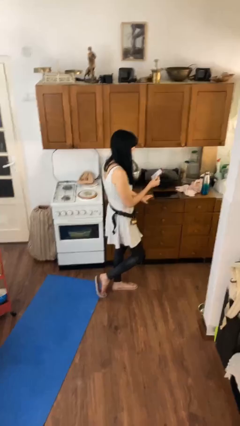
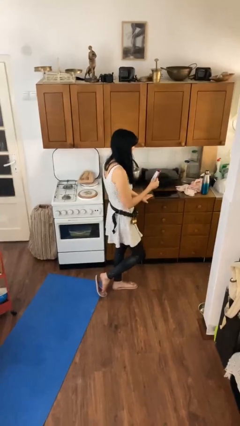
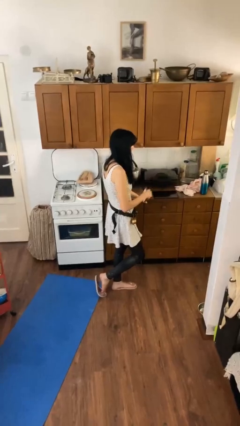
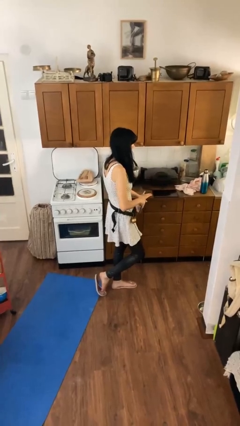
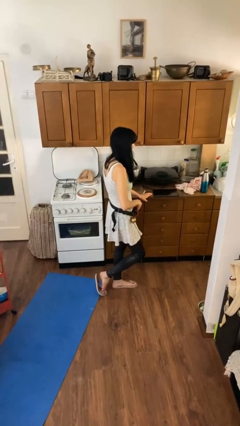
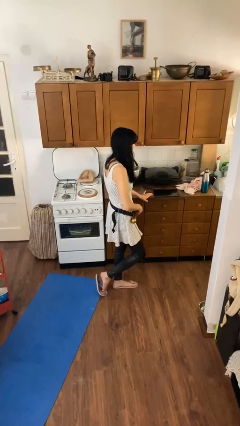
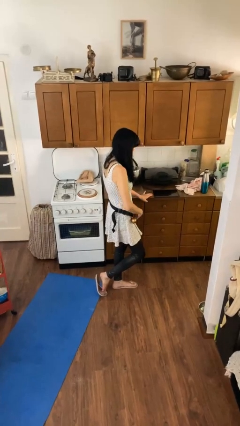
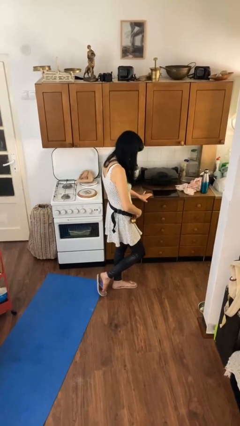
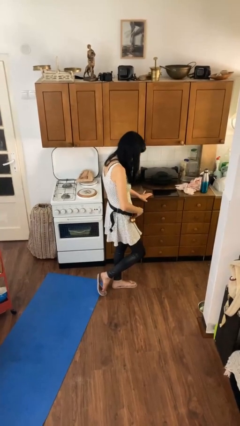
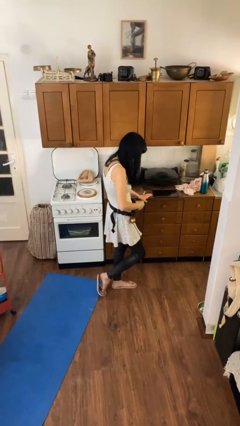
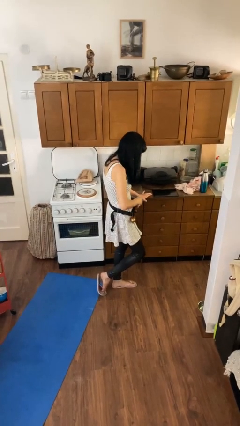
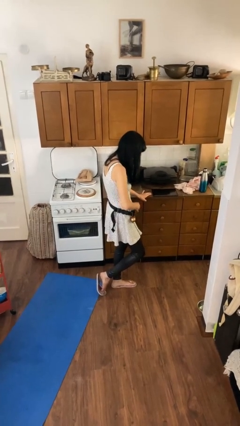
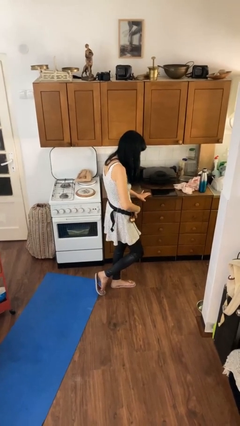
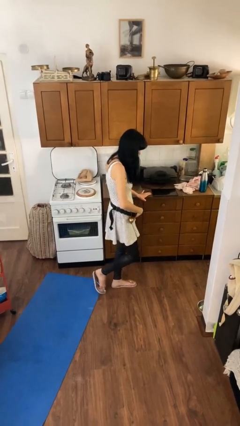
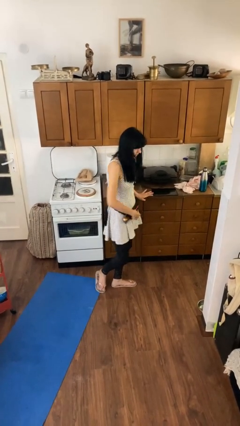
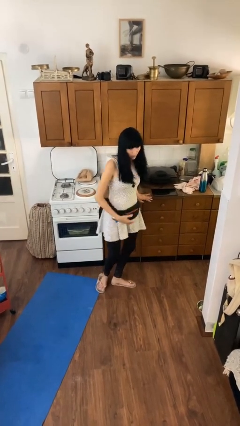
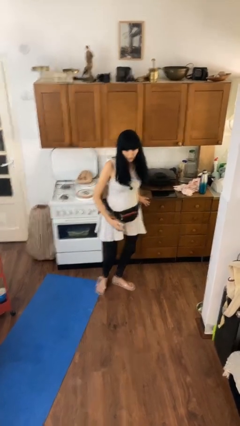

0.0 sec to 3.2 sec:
person puts phone into pocket

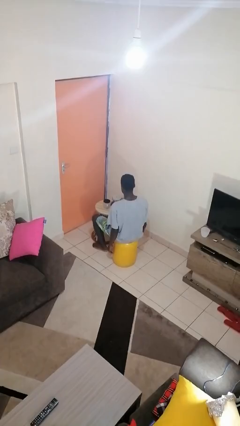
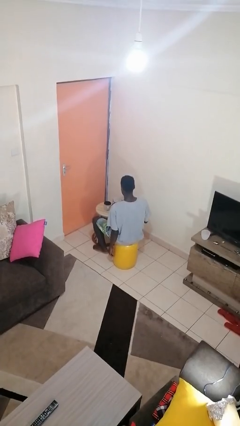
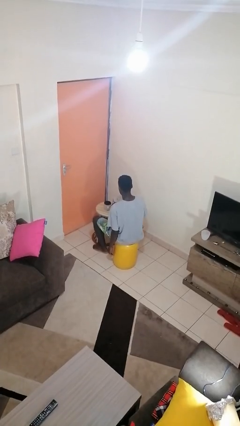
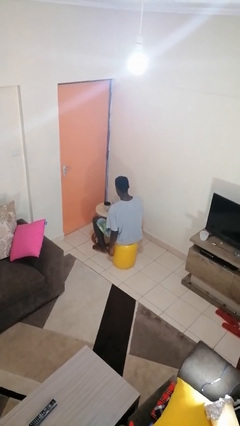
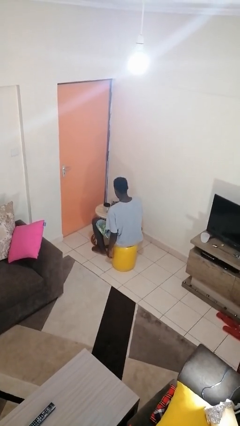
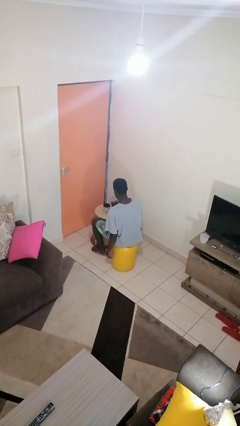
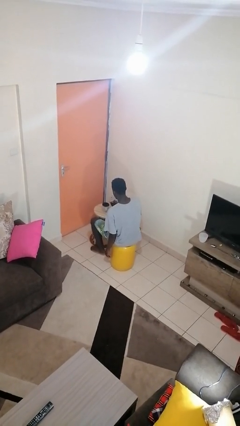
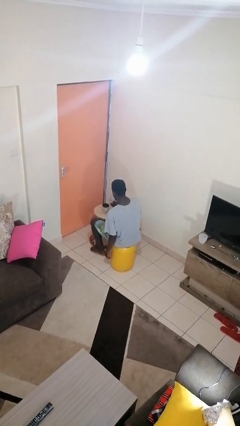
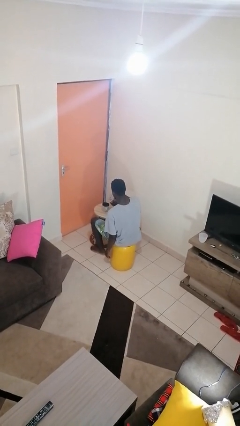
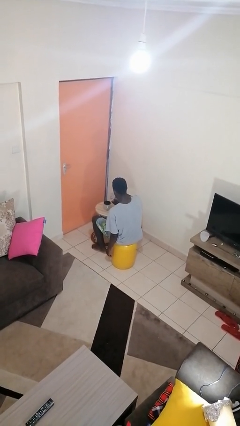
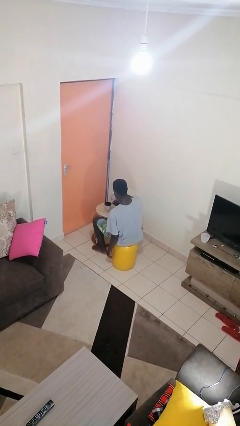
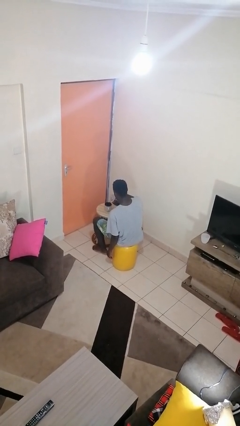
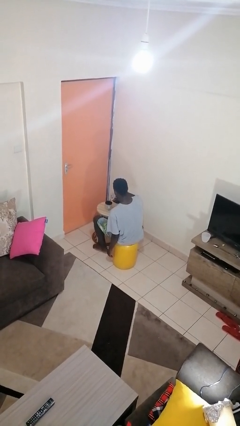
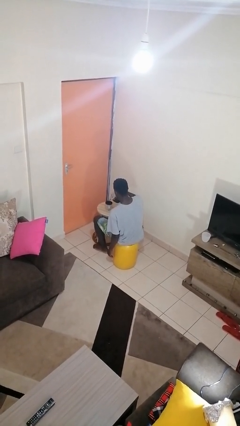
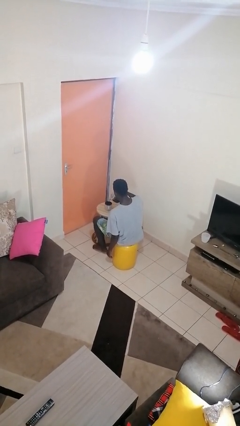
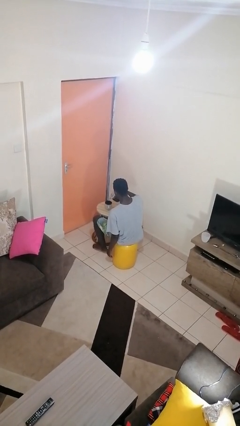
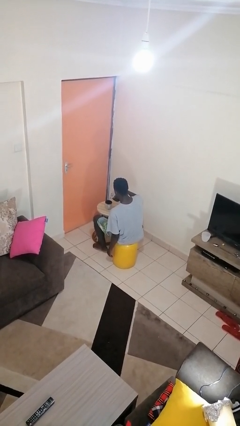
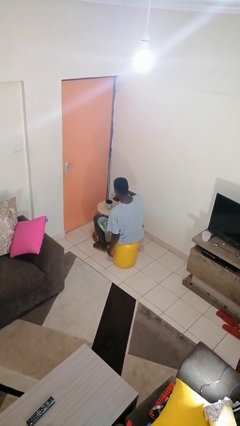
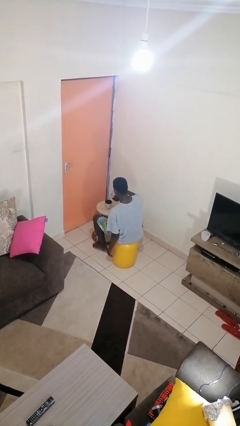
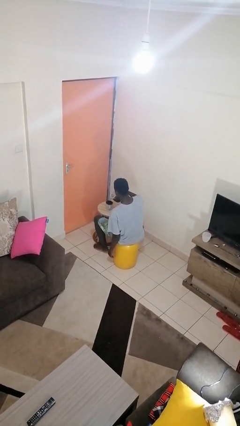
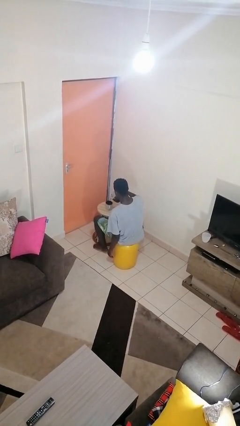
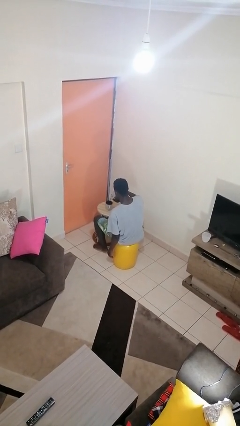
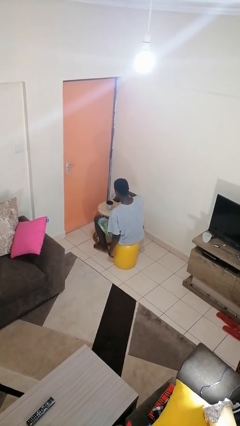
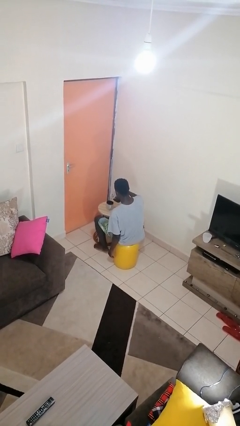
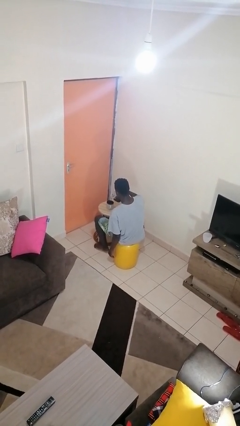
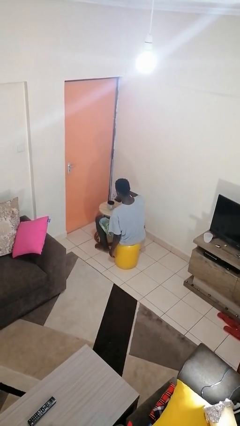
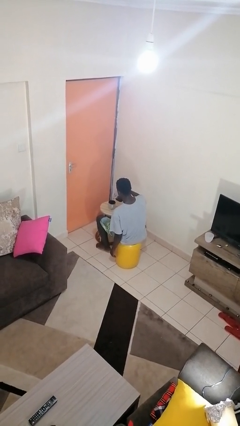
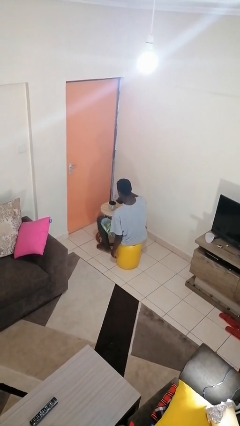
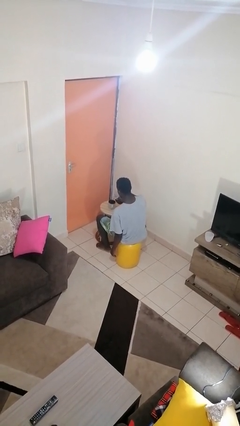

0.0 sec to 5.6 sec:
person pours coffee into mug

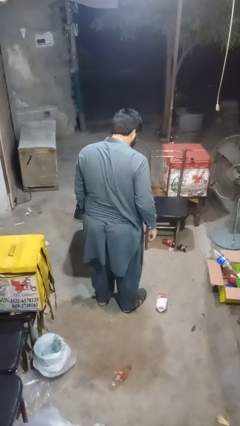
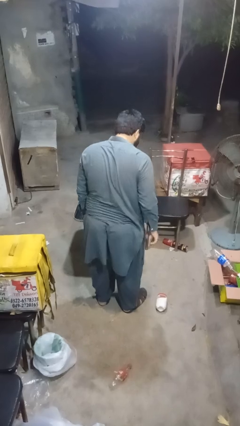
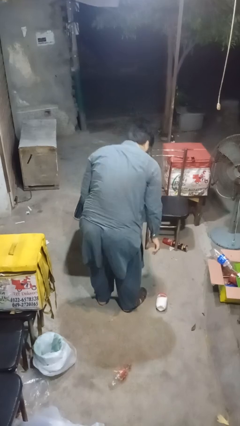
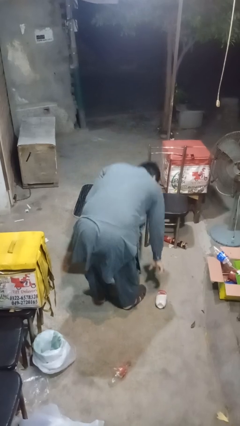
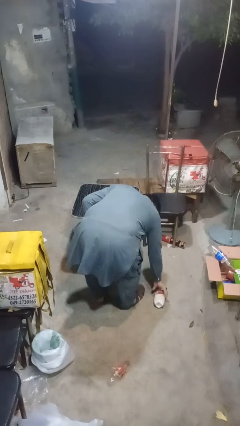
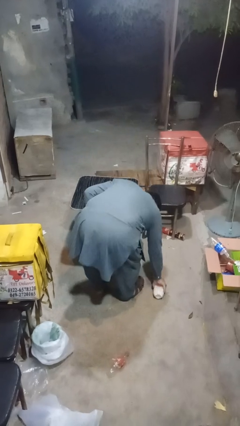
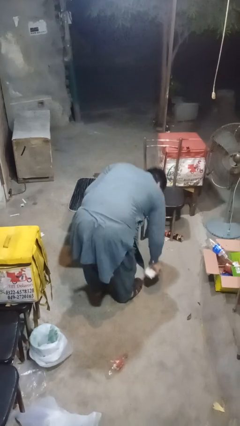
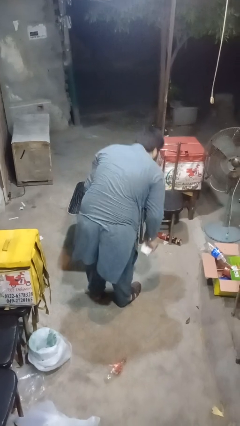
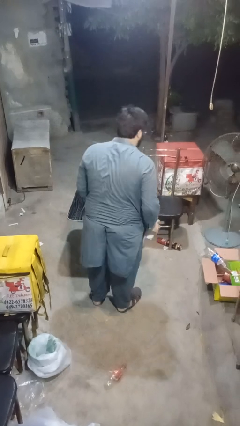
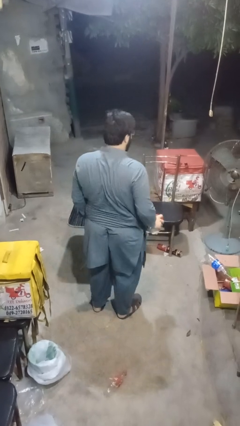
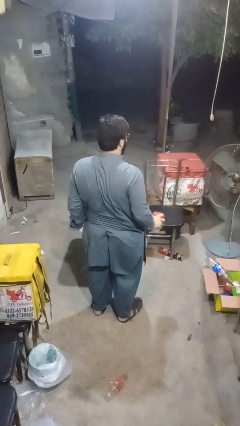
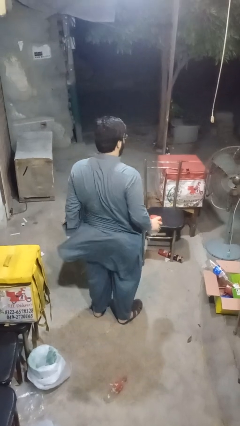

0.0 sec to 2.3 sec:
person picks up object from floor

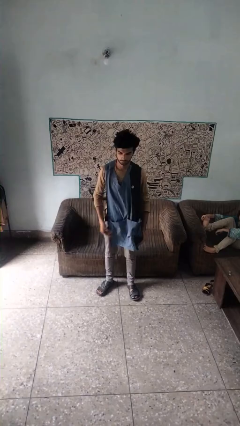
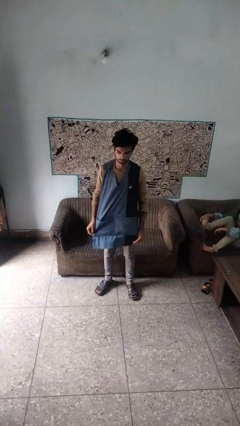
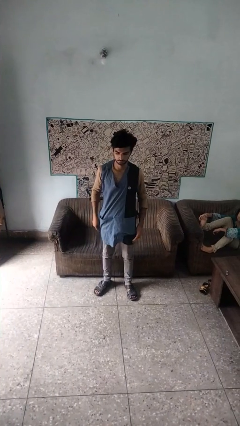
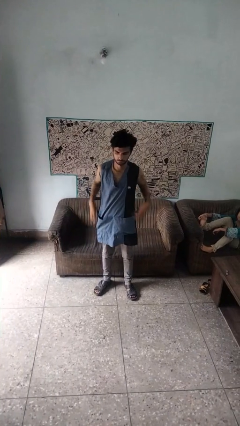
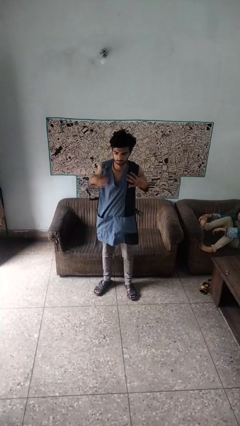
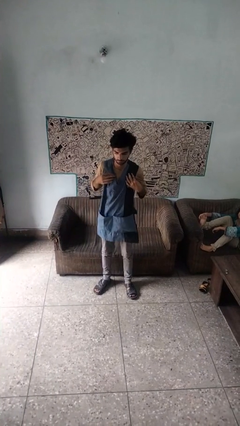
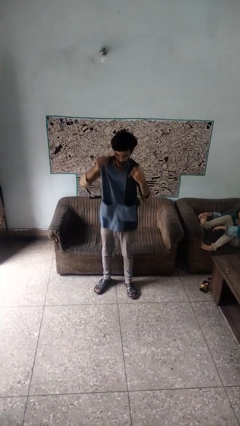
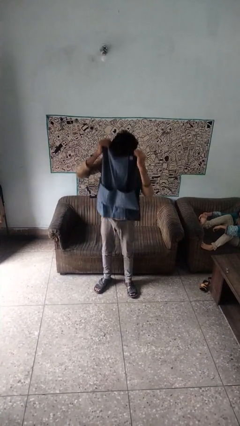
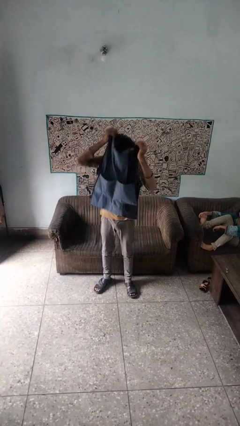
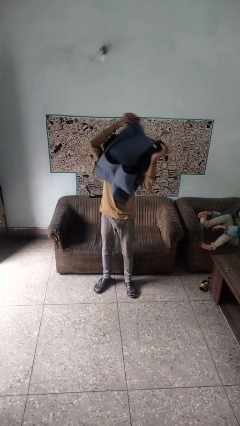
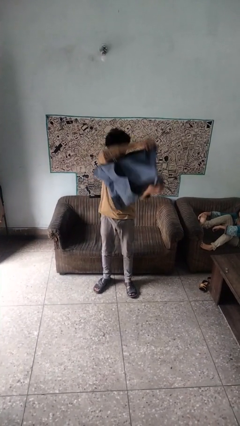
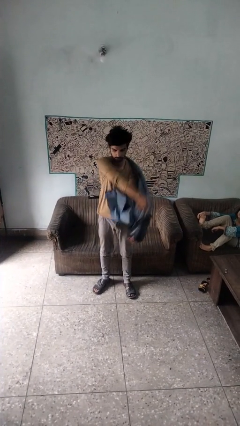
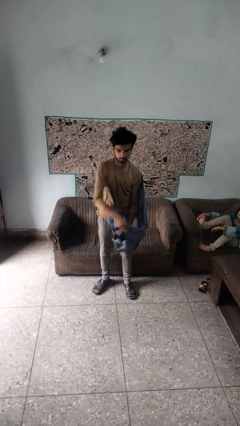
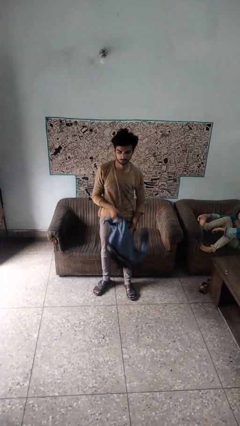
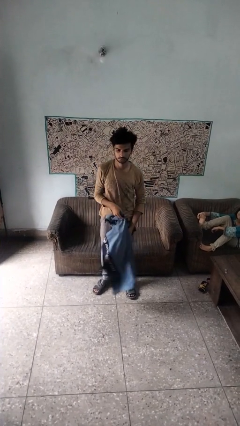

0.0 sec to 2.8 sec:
person takes off apron

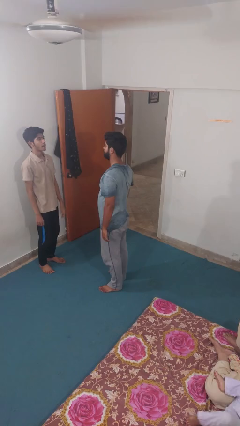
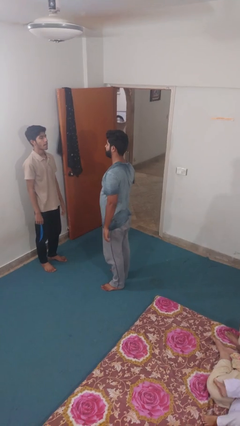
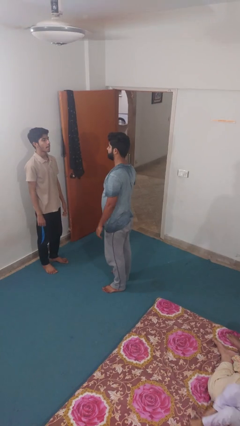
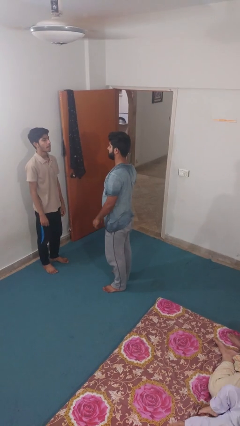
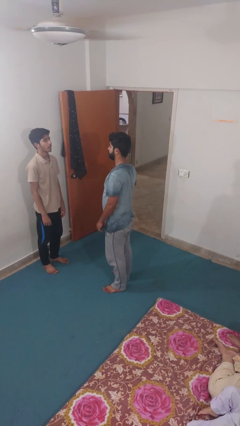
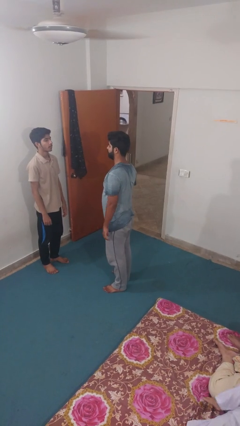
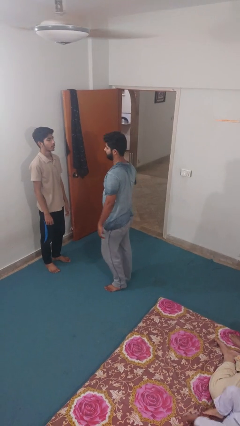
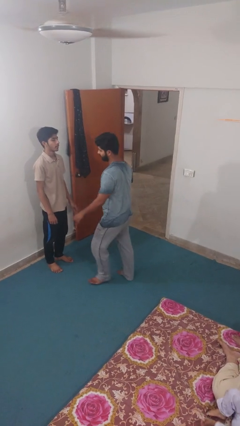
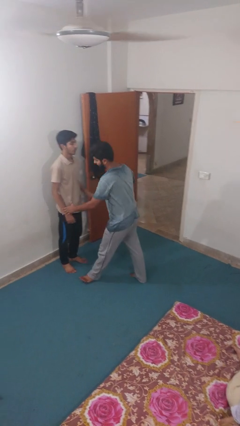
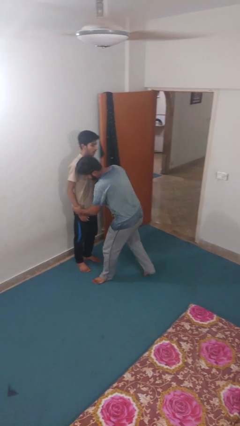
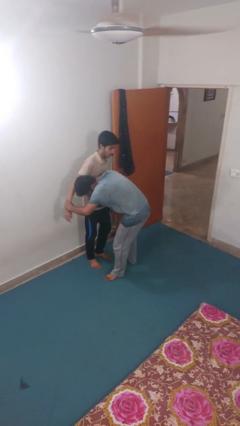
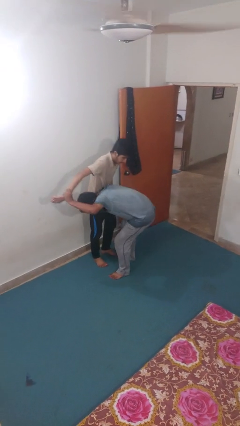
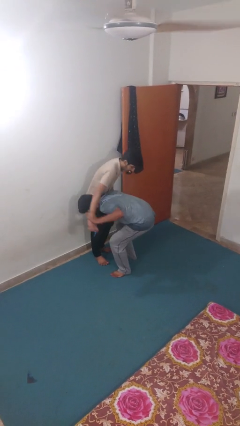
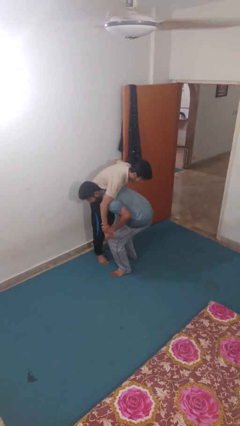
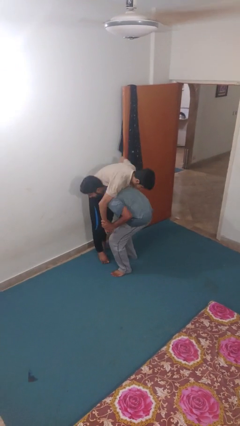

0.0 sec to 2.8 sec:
person carries person over shoulder

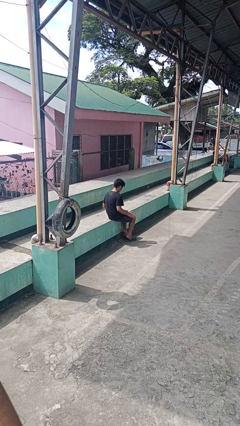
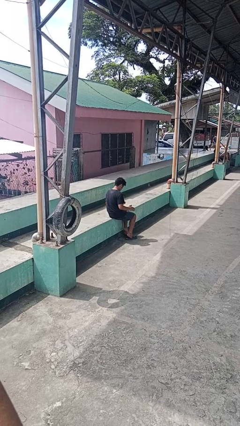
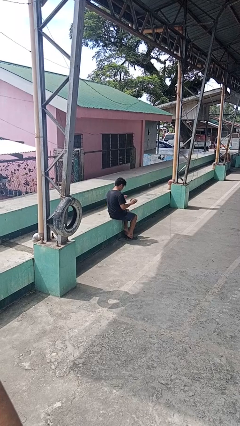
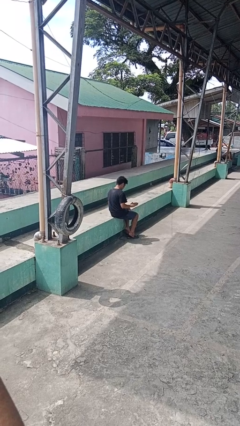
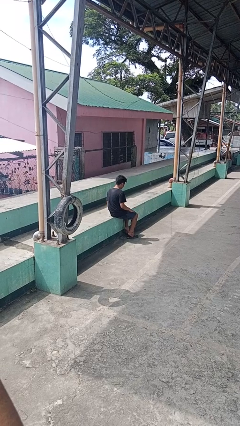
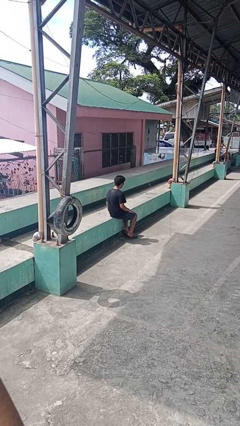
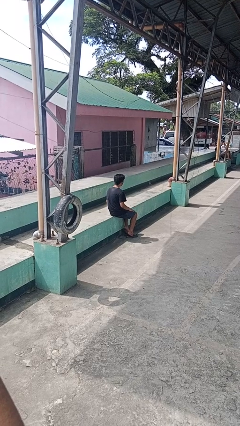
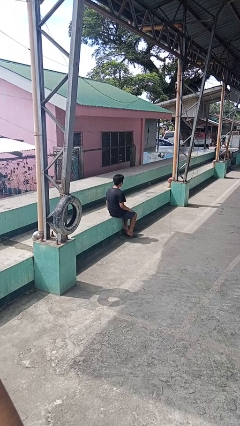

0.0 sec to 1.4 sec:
person slaps hands on thighs
